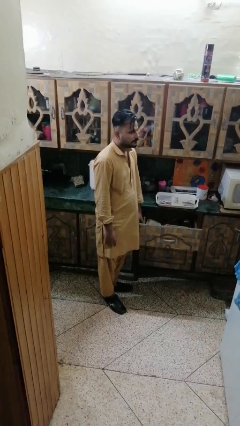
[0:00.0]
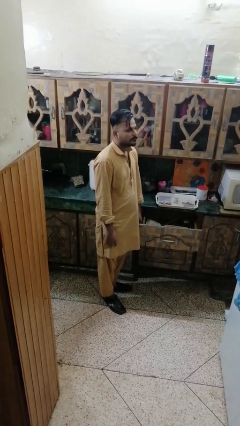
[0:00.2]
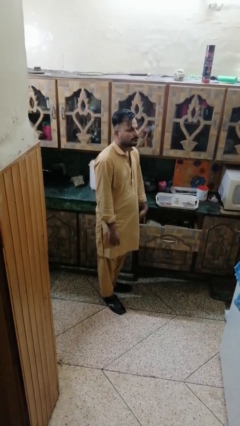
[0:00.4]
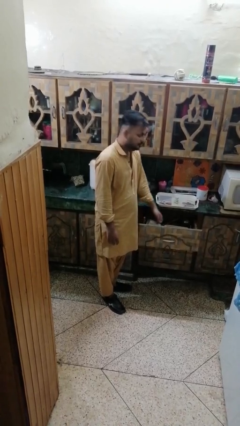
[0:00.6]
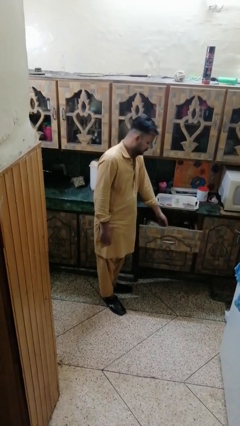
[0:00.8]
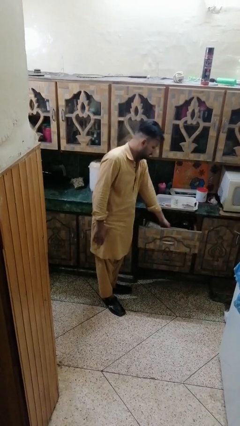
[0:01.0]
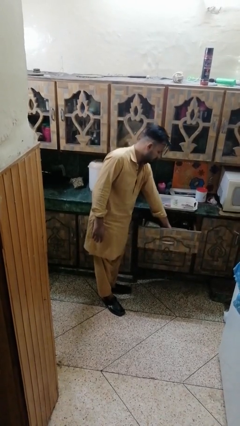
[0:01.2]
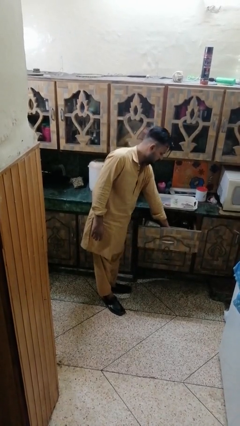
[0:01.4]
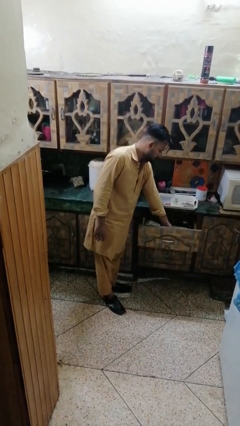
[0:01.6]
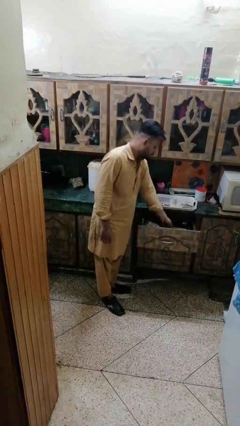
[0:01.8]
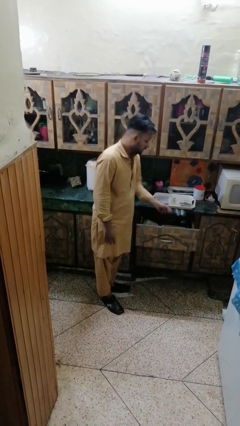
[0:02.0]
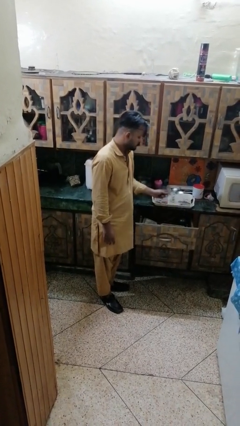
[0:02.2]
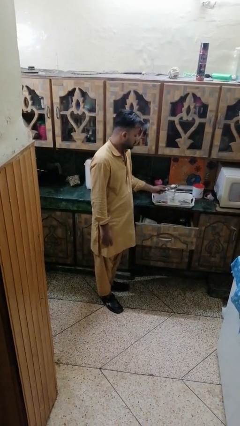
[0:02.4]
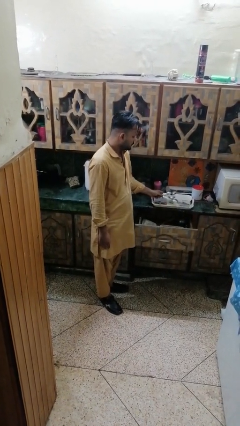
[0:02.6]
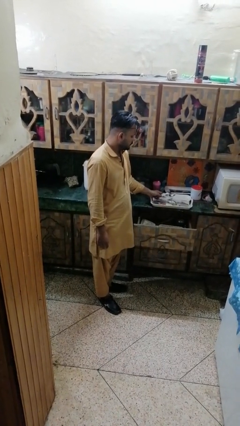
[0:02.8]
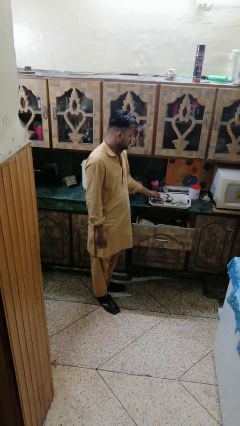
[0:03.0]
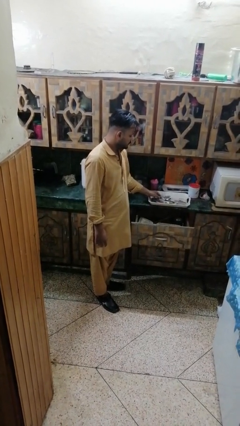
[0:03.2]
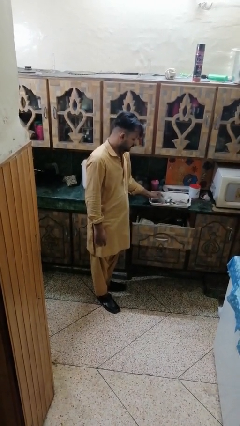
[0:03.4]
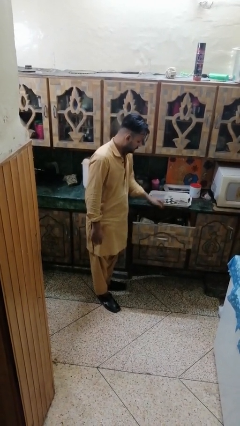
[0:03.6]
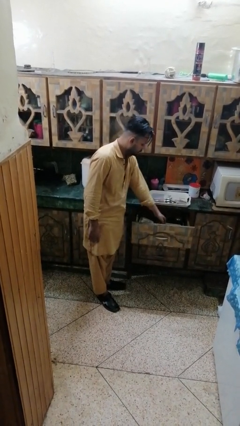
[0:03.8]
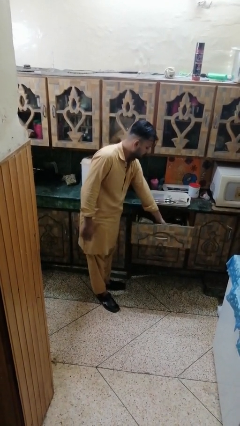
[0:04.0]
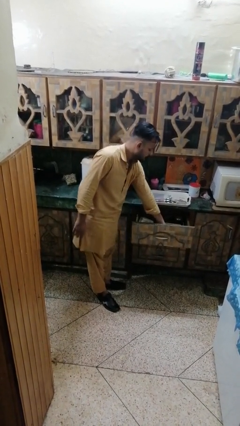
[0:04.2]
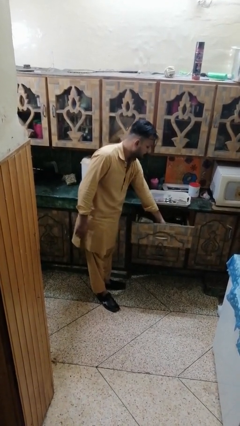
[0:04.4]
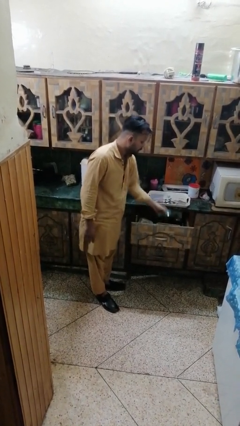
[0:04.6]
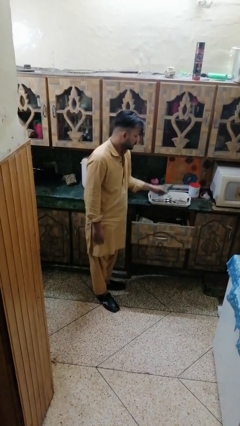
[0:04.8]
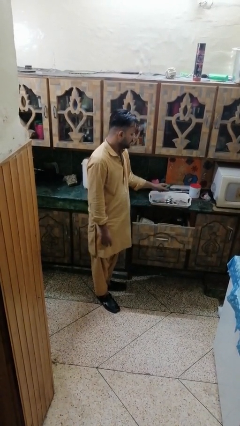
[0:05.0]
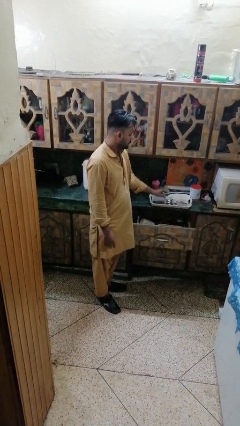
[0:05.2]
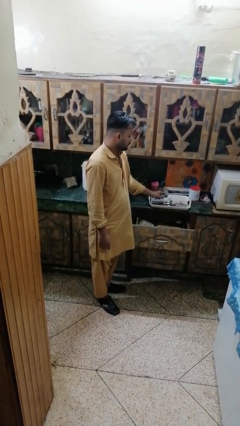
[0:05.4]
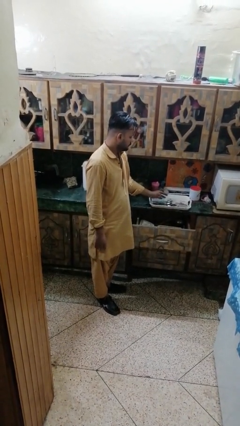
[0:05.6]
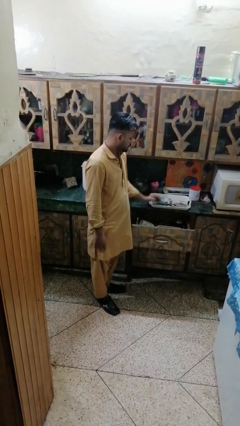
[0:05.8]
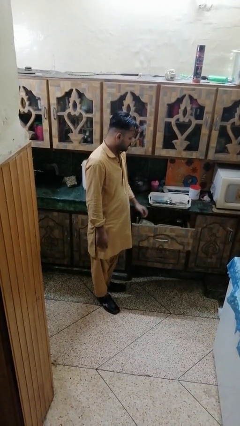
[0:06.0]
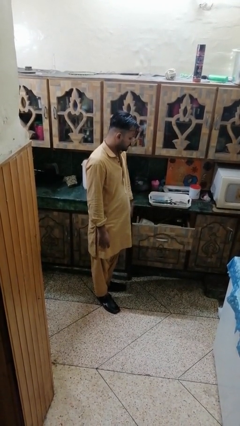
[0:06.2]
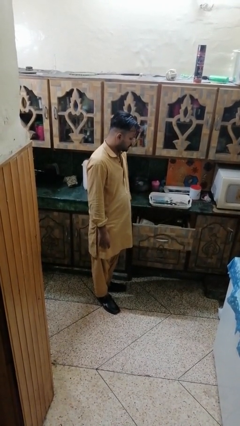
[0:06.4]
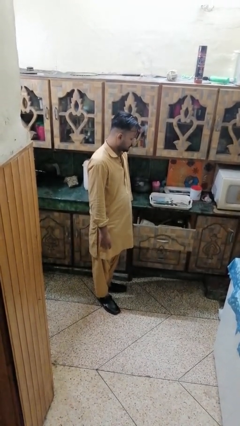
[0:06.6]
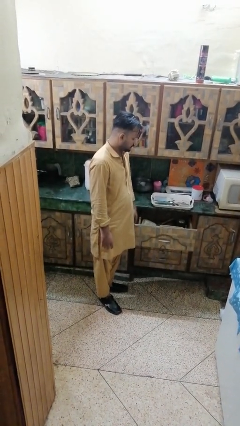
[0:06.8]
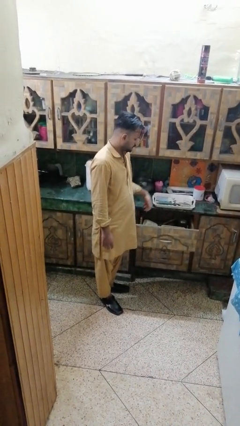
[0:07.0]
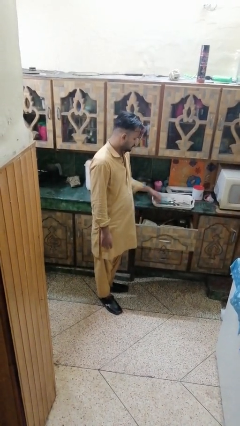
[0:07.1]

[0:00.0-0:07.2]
person takes object from kitchen drawer

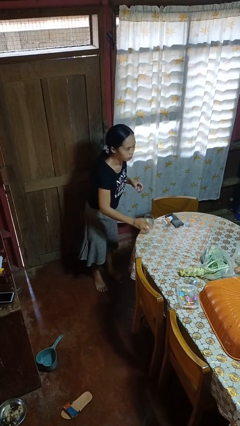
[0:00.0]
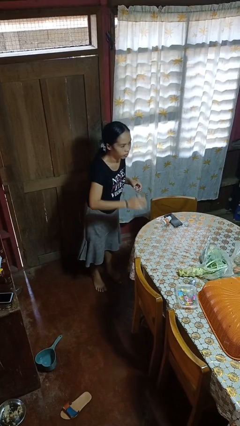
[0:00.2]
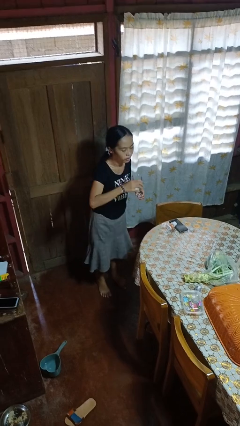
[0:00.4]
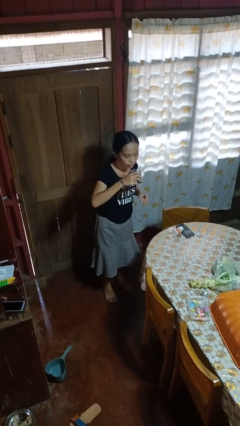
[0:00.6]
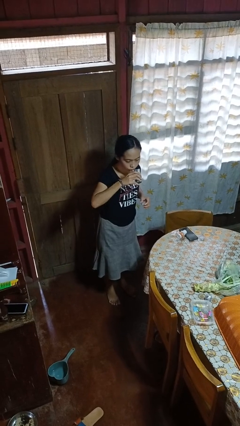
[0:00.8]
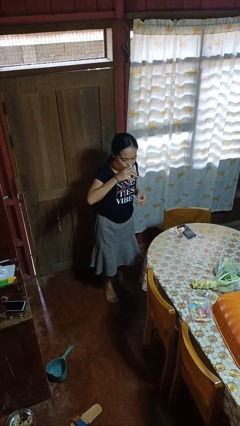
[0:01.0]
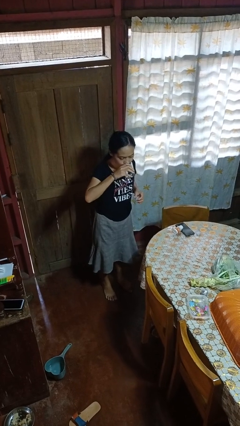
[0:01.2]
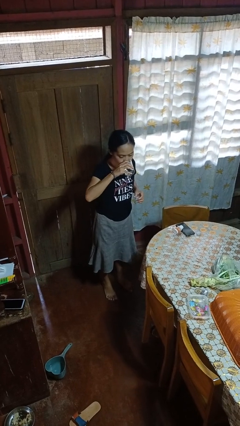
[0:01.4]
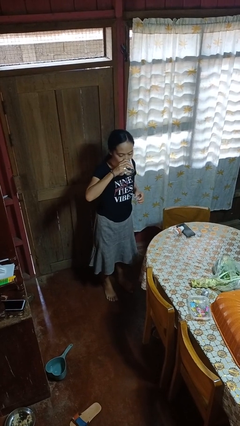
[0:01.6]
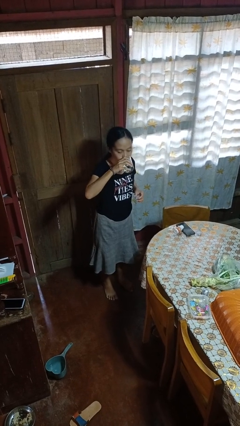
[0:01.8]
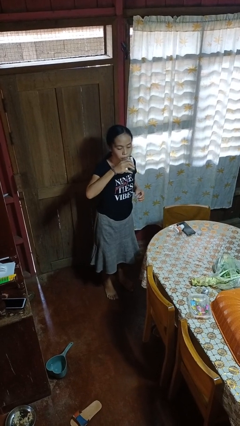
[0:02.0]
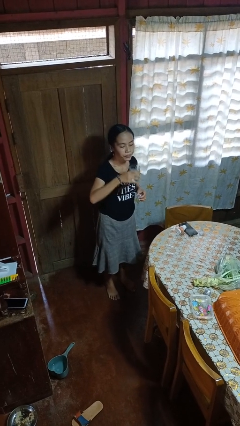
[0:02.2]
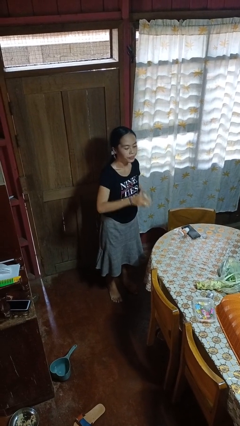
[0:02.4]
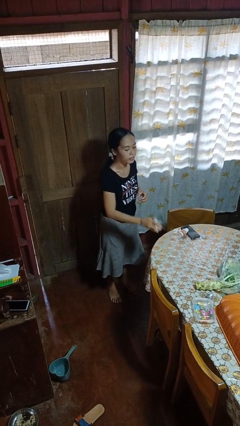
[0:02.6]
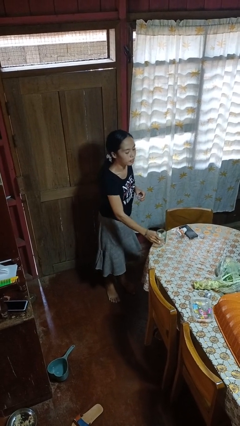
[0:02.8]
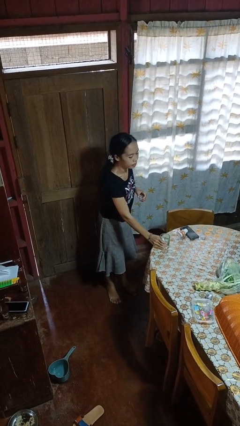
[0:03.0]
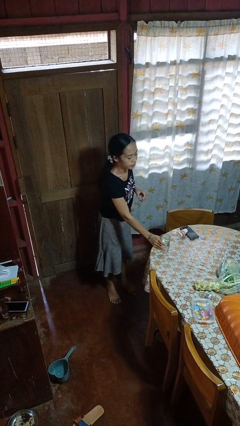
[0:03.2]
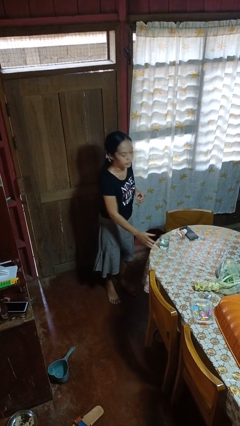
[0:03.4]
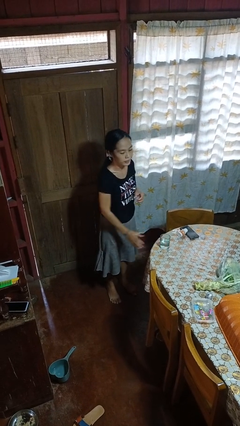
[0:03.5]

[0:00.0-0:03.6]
person drinks from cup

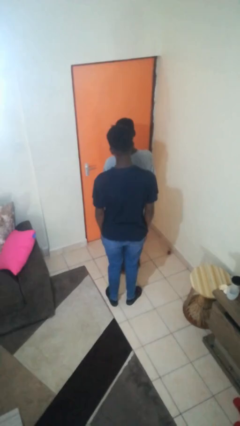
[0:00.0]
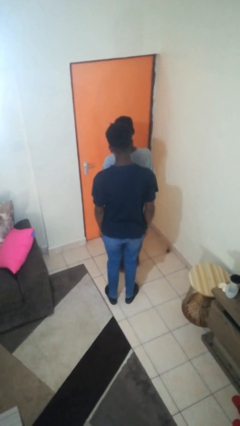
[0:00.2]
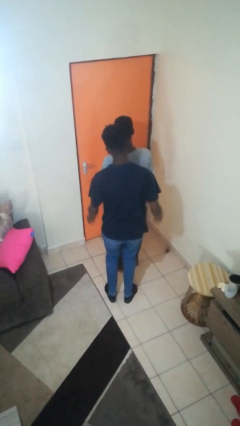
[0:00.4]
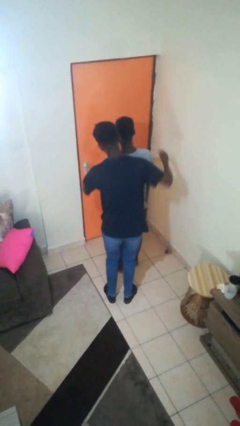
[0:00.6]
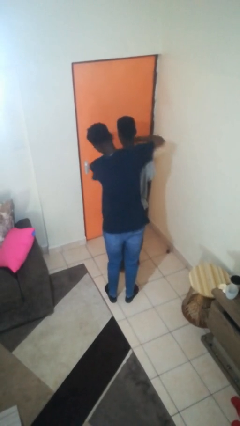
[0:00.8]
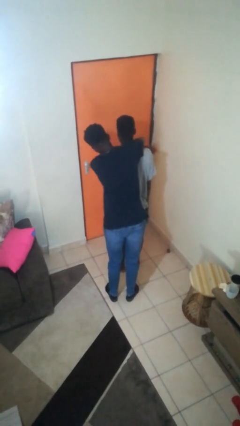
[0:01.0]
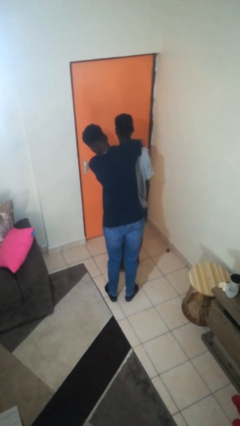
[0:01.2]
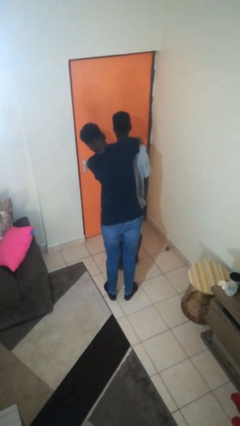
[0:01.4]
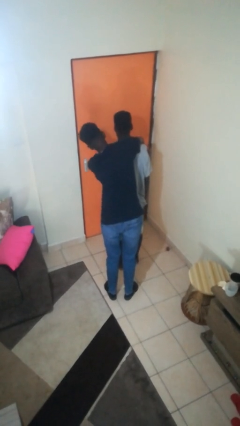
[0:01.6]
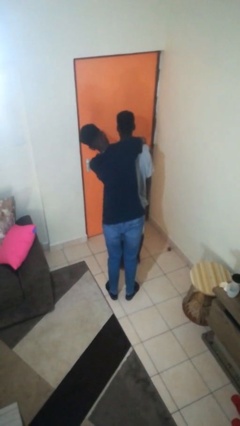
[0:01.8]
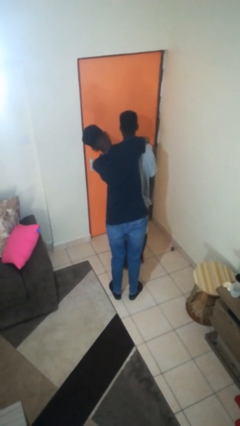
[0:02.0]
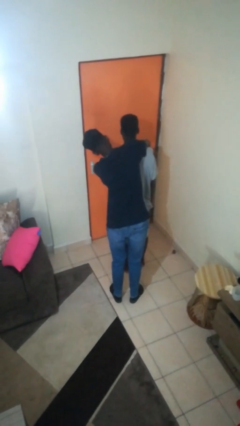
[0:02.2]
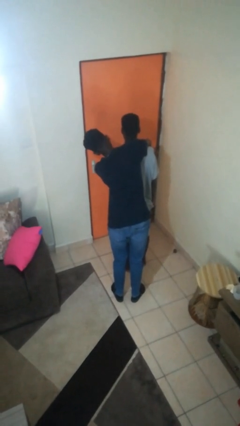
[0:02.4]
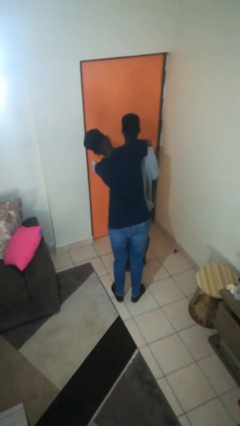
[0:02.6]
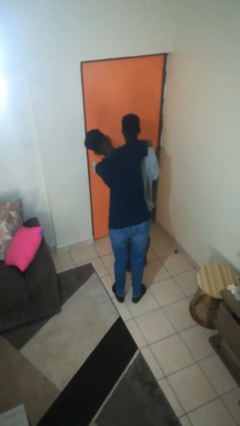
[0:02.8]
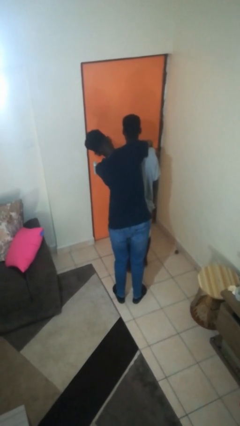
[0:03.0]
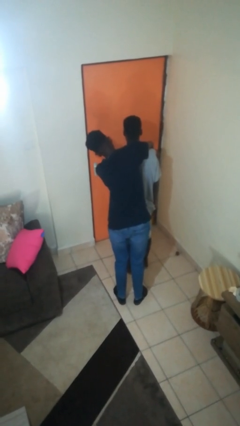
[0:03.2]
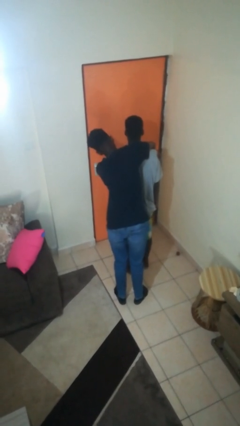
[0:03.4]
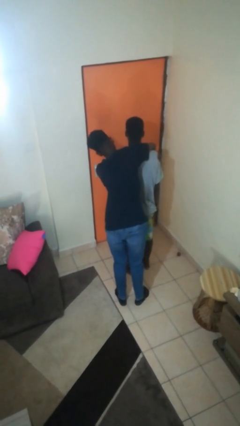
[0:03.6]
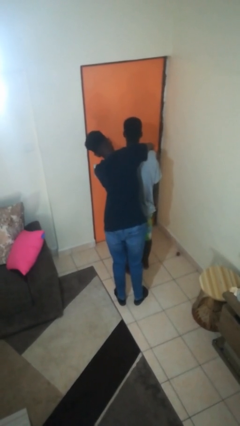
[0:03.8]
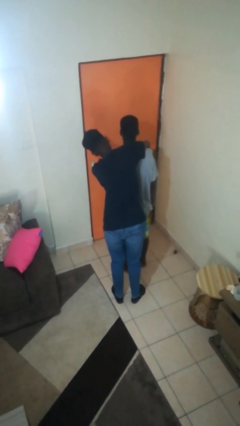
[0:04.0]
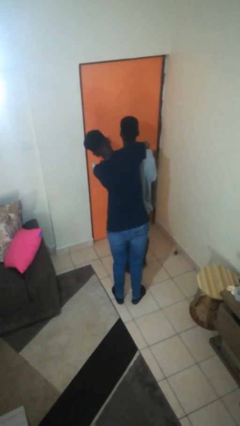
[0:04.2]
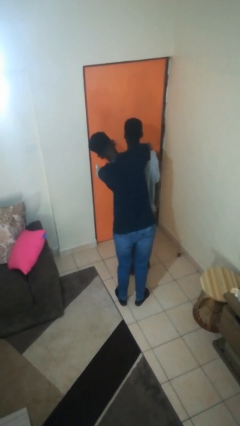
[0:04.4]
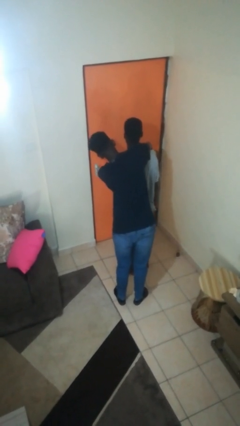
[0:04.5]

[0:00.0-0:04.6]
person hugs person from behind

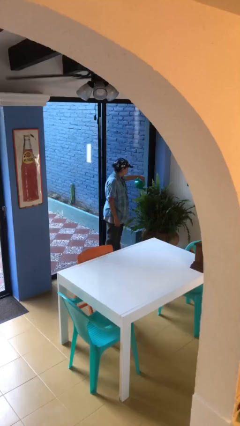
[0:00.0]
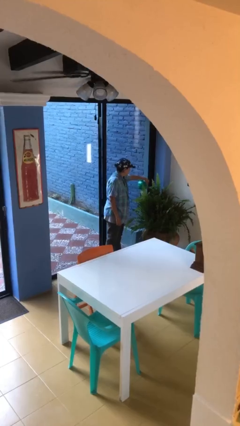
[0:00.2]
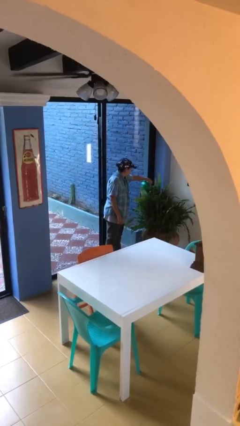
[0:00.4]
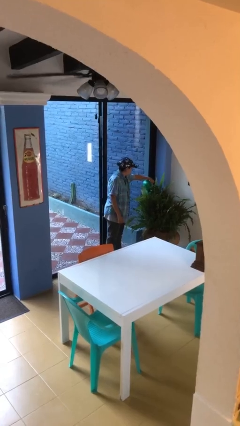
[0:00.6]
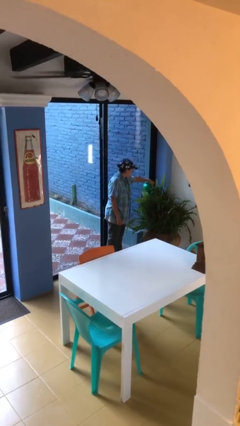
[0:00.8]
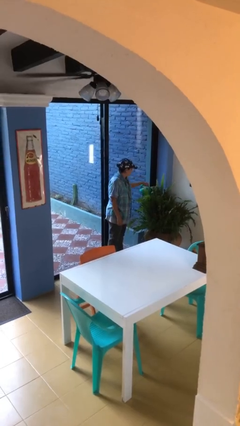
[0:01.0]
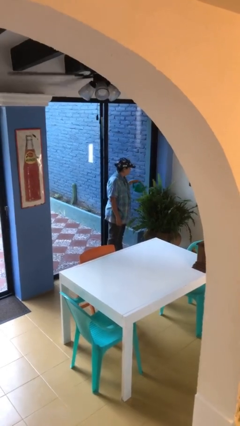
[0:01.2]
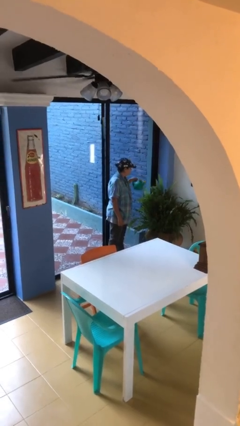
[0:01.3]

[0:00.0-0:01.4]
person waters houseplant

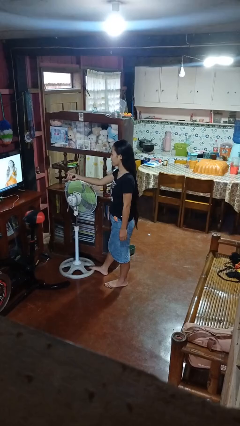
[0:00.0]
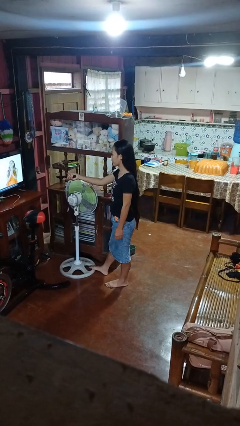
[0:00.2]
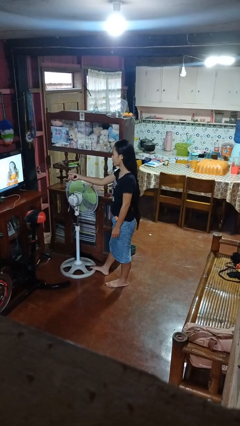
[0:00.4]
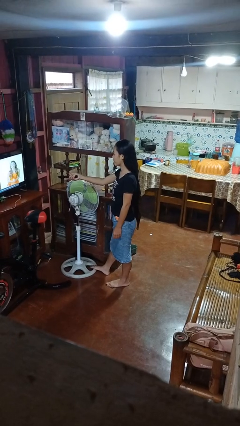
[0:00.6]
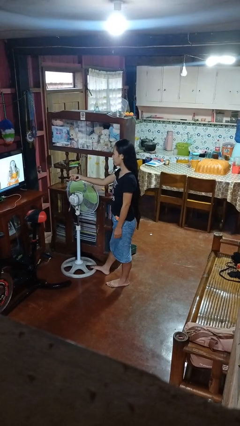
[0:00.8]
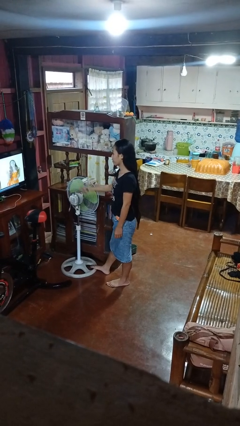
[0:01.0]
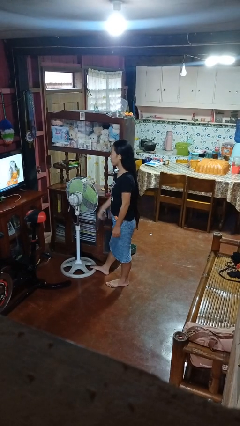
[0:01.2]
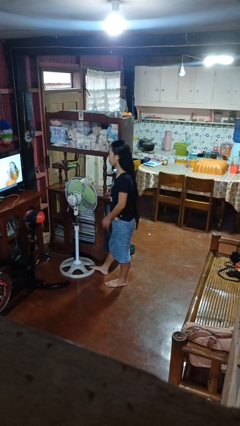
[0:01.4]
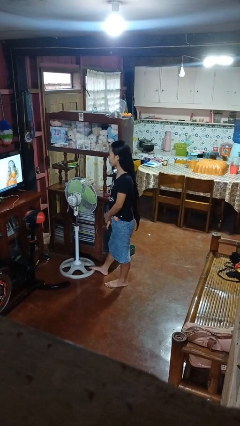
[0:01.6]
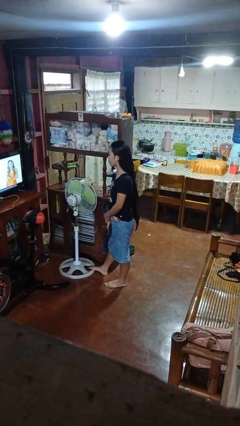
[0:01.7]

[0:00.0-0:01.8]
person uses television remote
